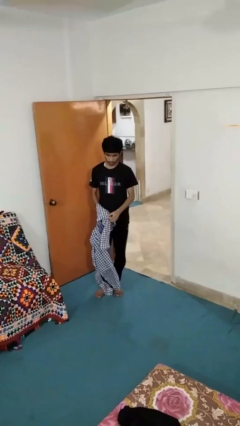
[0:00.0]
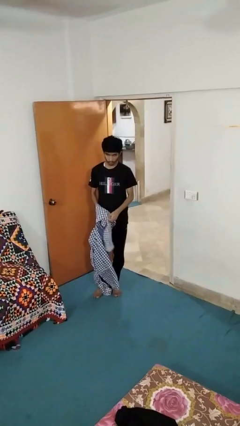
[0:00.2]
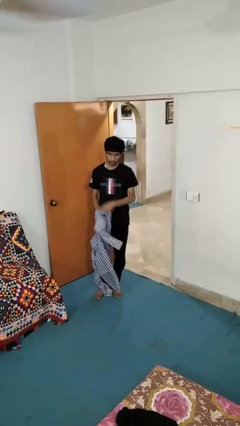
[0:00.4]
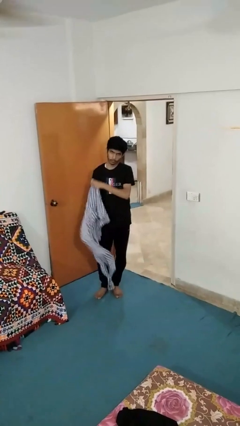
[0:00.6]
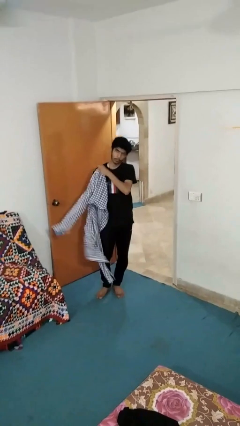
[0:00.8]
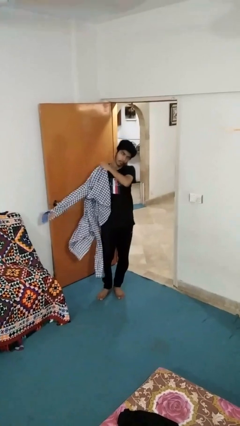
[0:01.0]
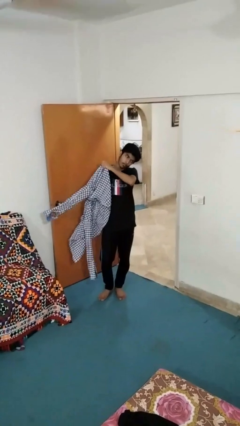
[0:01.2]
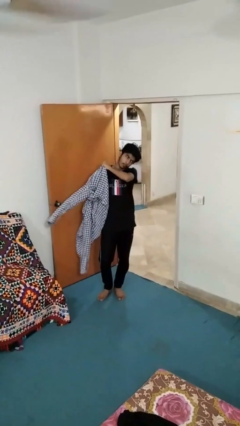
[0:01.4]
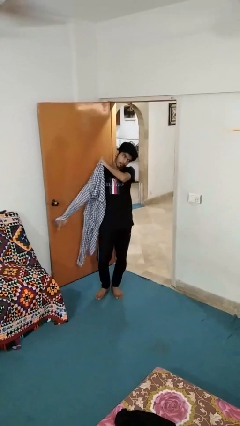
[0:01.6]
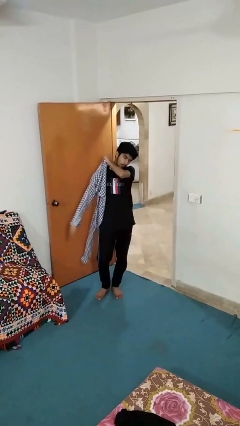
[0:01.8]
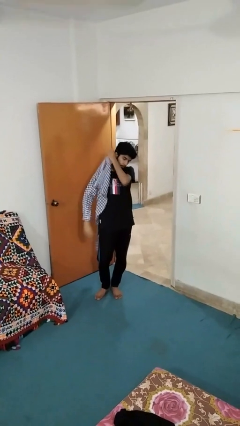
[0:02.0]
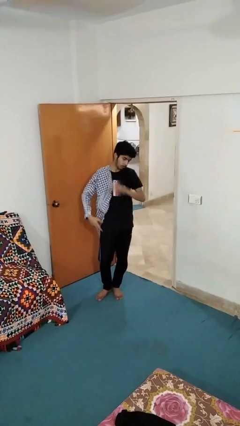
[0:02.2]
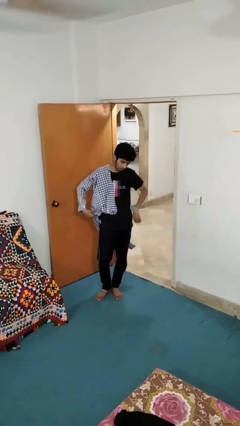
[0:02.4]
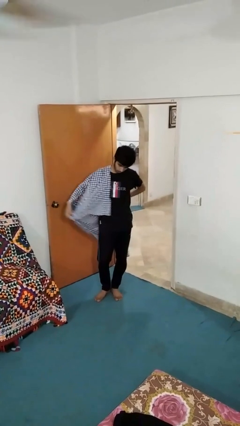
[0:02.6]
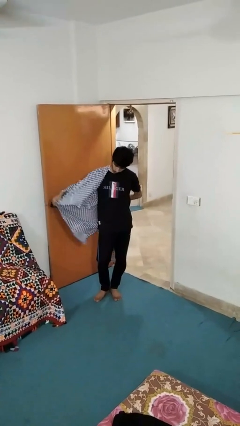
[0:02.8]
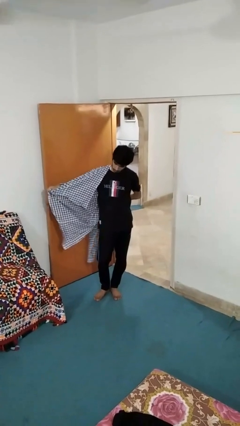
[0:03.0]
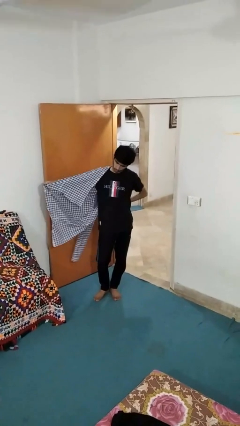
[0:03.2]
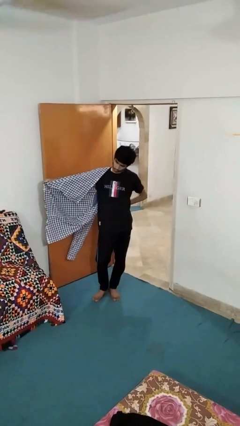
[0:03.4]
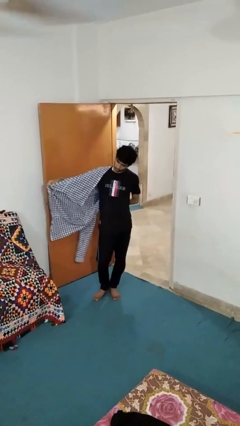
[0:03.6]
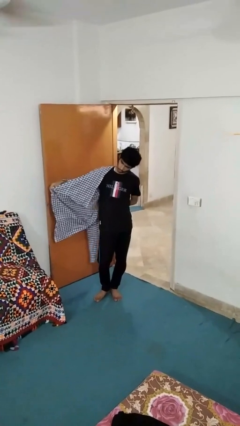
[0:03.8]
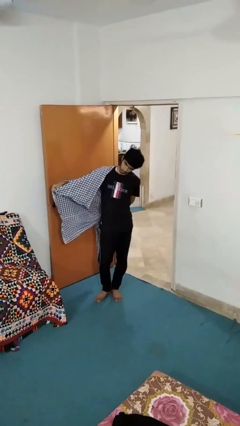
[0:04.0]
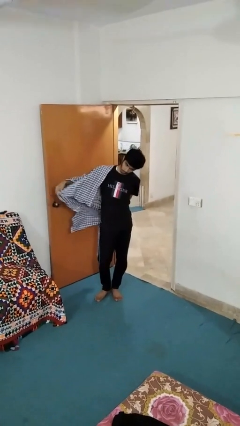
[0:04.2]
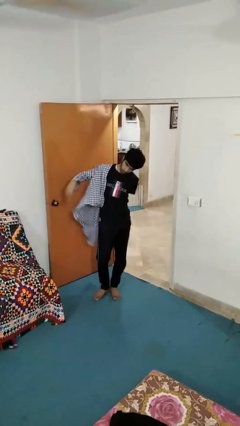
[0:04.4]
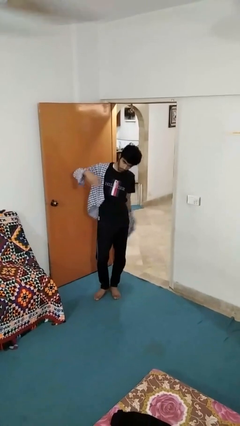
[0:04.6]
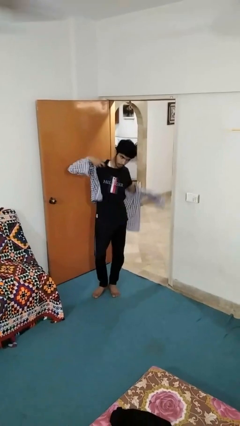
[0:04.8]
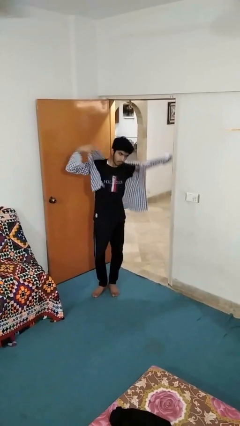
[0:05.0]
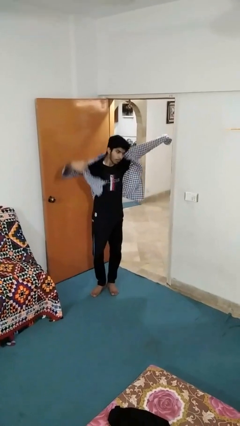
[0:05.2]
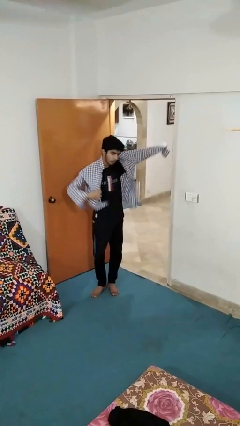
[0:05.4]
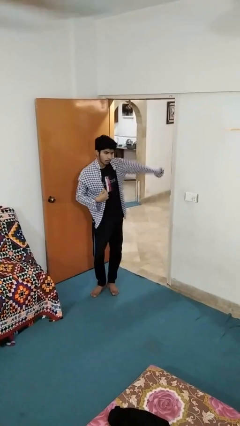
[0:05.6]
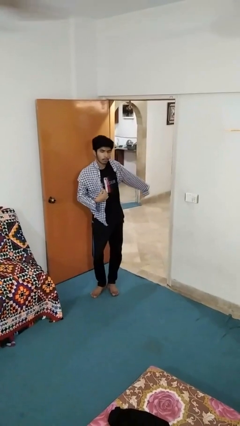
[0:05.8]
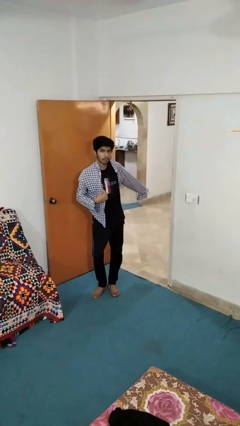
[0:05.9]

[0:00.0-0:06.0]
person puts on shirt

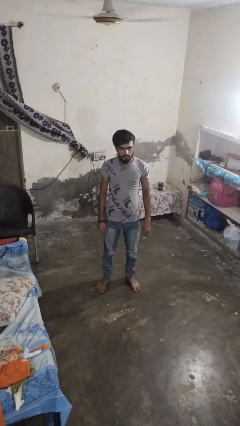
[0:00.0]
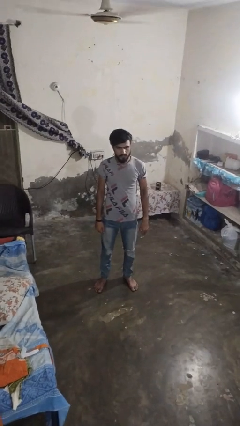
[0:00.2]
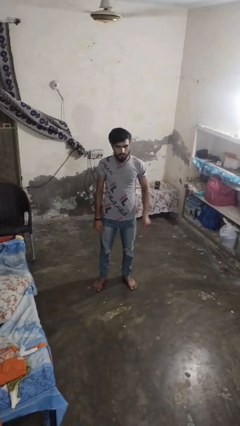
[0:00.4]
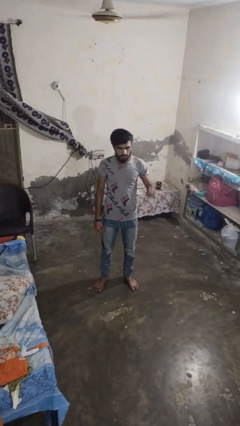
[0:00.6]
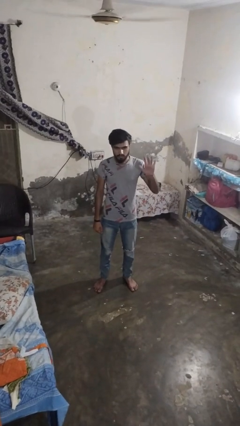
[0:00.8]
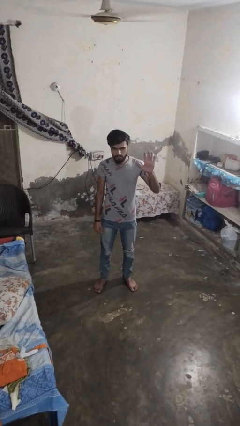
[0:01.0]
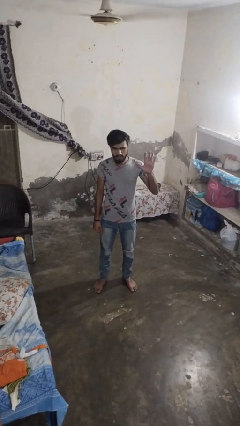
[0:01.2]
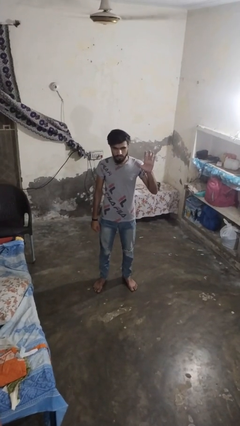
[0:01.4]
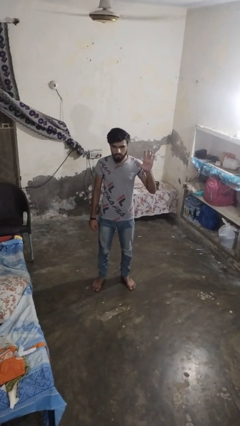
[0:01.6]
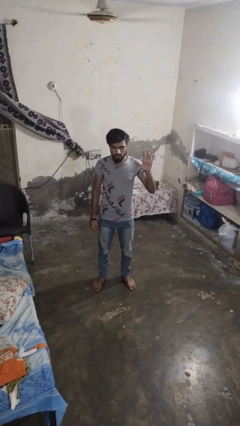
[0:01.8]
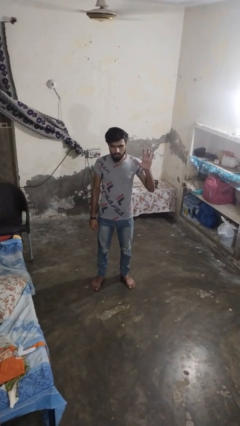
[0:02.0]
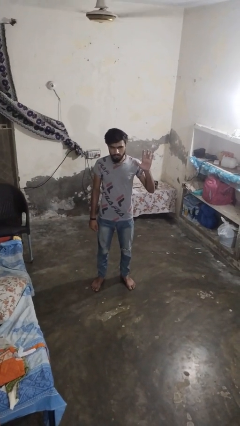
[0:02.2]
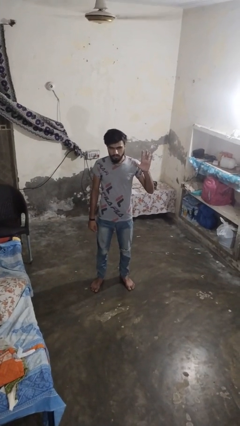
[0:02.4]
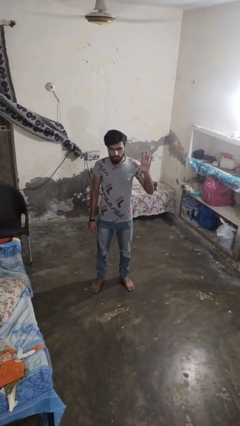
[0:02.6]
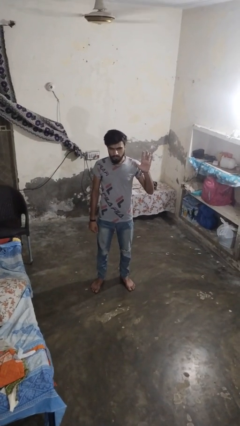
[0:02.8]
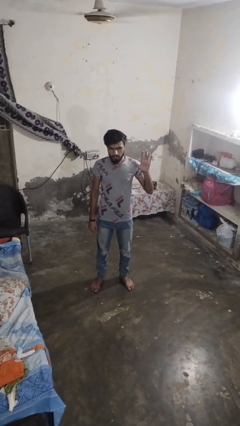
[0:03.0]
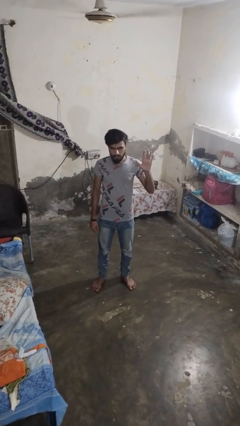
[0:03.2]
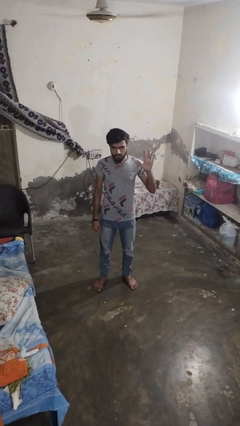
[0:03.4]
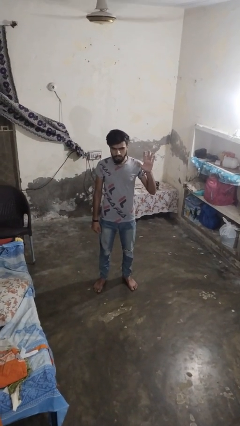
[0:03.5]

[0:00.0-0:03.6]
person gestures number five

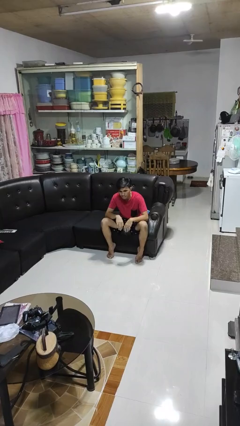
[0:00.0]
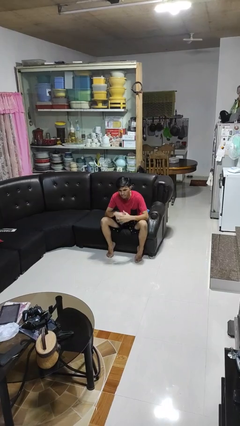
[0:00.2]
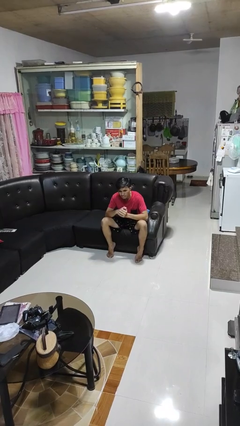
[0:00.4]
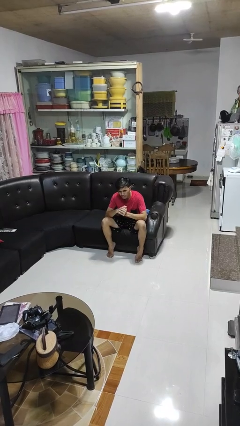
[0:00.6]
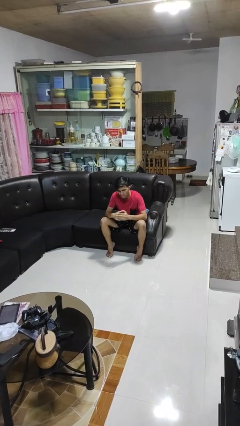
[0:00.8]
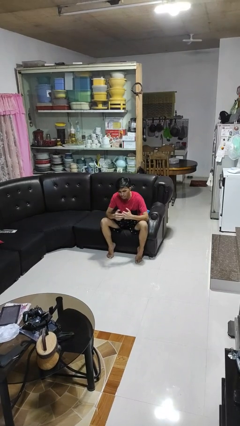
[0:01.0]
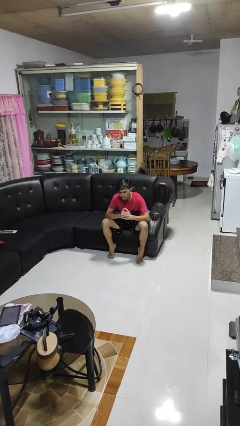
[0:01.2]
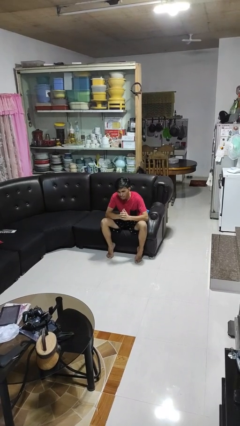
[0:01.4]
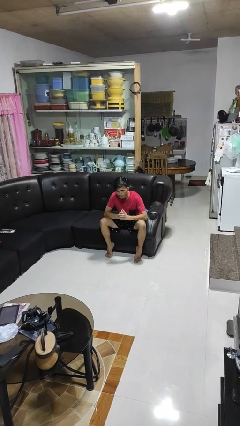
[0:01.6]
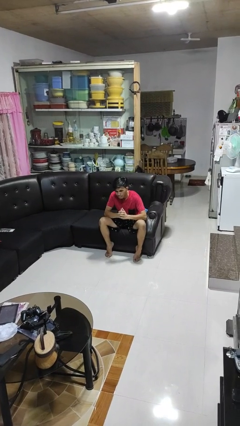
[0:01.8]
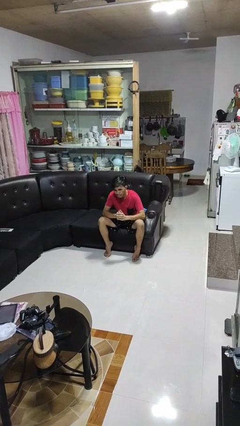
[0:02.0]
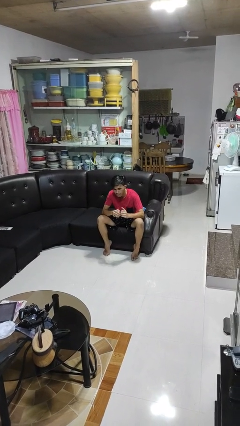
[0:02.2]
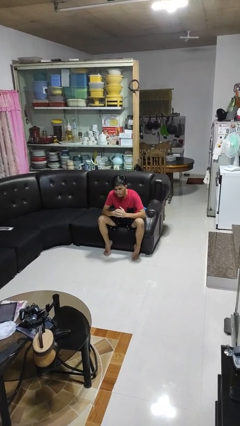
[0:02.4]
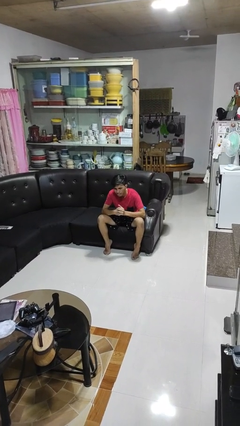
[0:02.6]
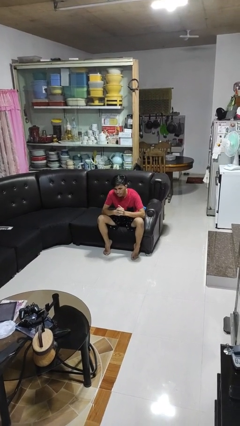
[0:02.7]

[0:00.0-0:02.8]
person cracks knuckles

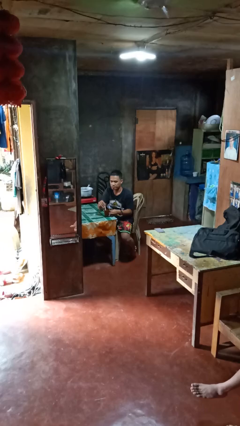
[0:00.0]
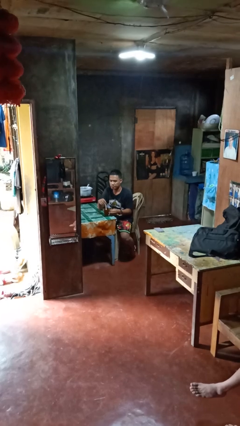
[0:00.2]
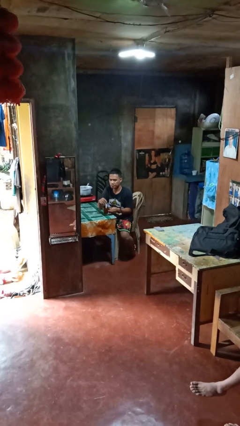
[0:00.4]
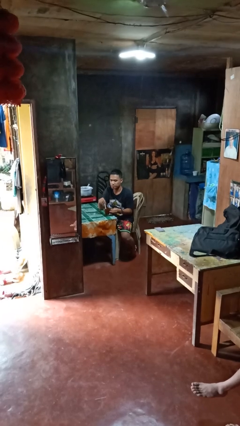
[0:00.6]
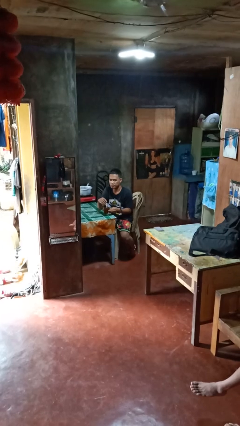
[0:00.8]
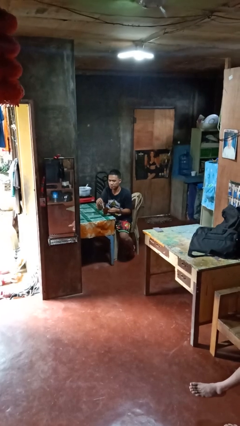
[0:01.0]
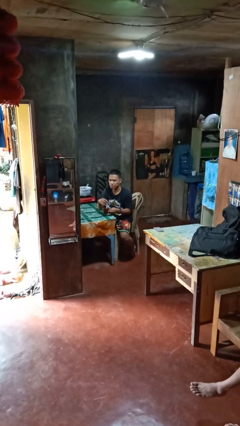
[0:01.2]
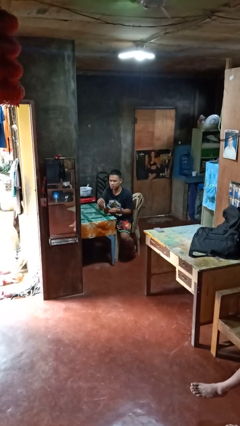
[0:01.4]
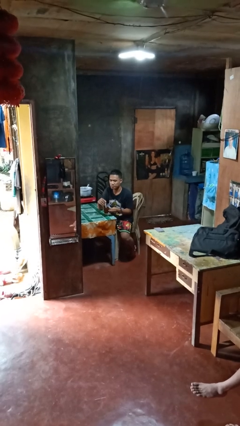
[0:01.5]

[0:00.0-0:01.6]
person stirs mug

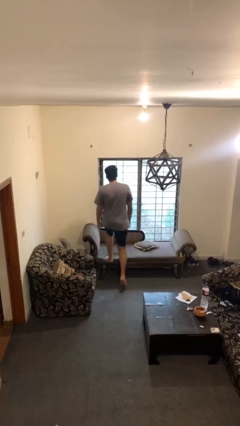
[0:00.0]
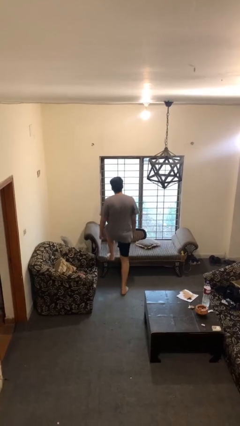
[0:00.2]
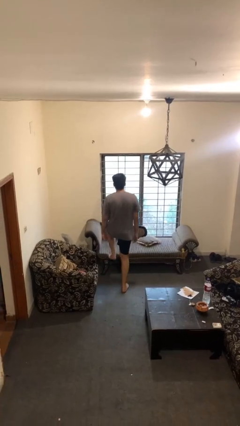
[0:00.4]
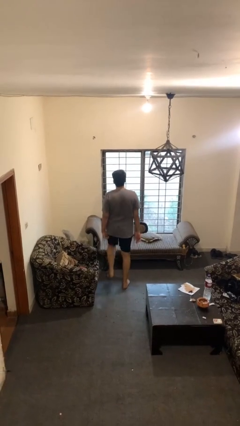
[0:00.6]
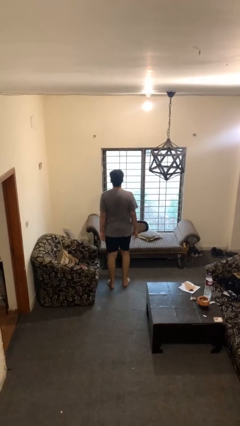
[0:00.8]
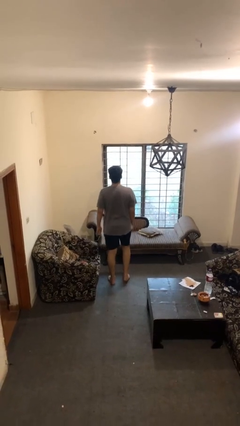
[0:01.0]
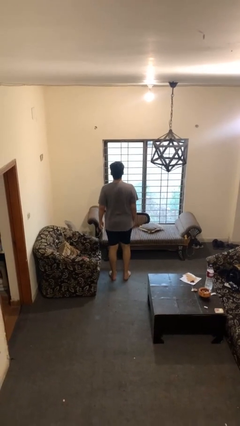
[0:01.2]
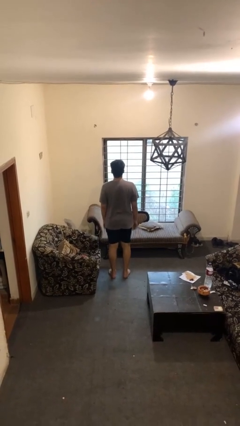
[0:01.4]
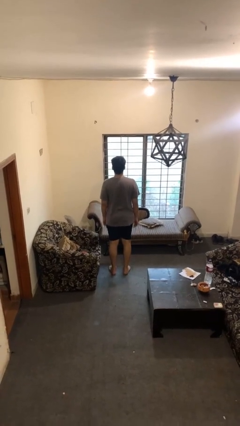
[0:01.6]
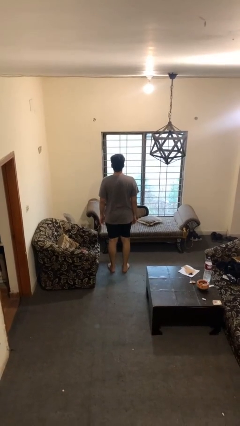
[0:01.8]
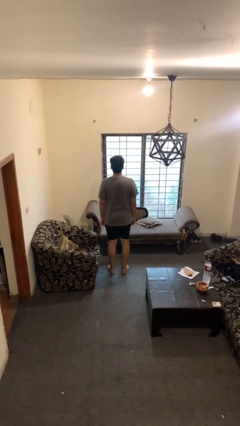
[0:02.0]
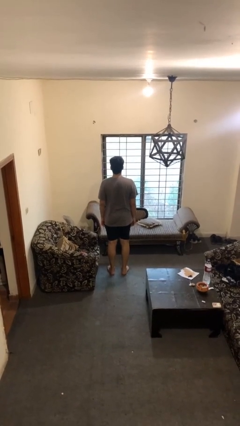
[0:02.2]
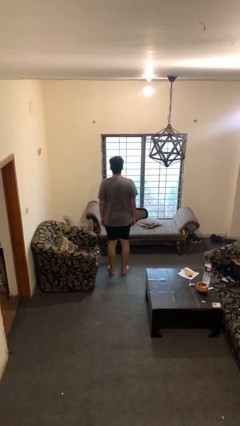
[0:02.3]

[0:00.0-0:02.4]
person climbs off couch

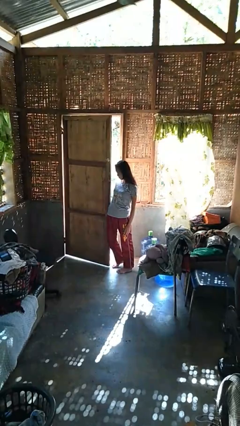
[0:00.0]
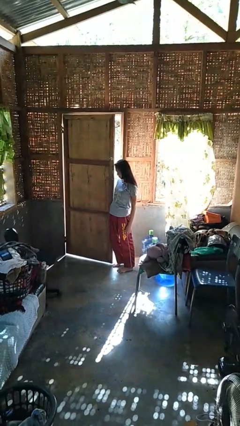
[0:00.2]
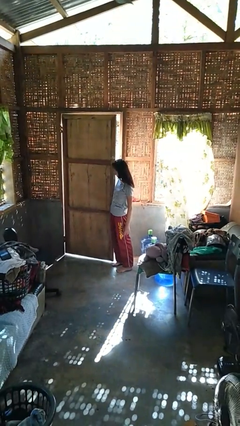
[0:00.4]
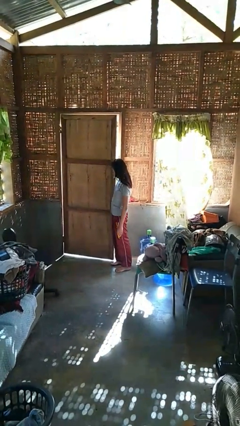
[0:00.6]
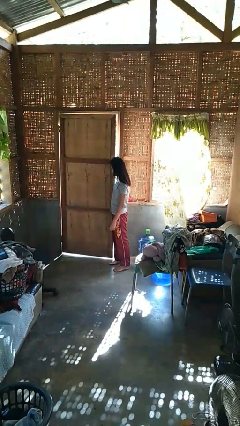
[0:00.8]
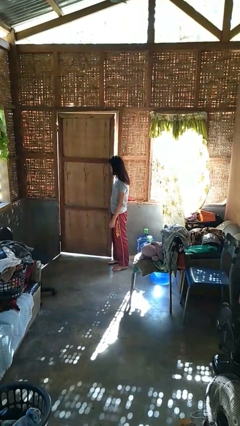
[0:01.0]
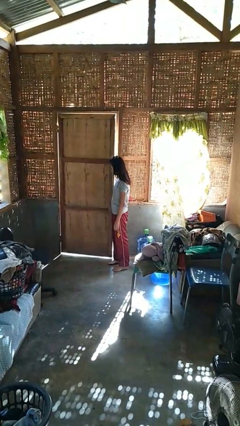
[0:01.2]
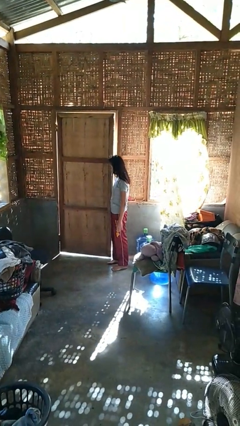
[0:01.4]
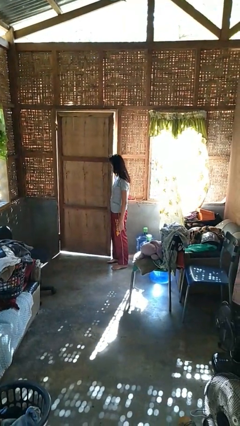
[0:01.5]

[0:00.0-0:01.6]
person closes door with hip
